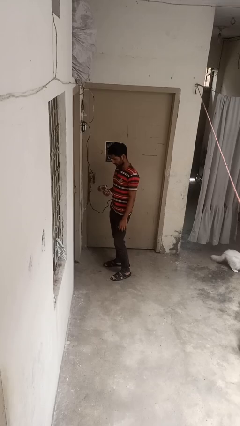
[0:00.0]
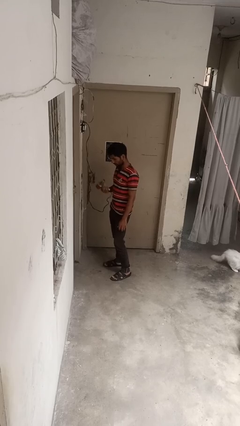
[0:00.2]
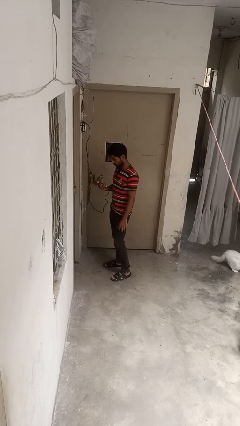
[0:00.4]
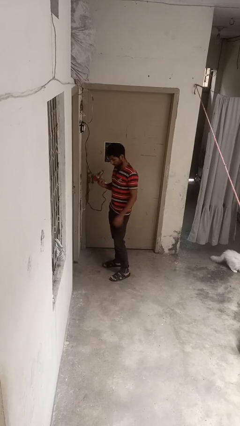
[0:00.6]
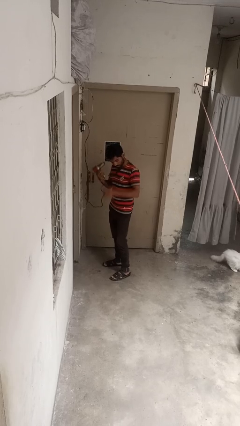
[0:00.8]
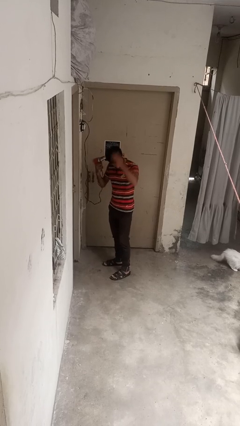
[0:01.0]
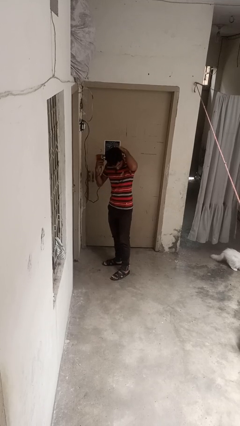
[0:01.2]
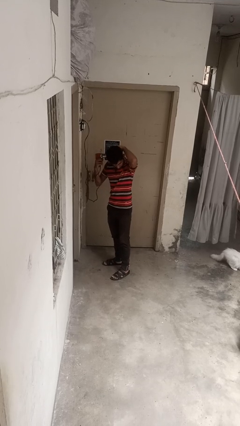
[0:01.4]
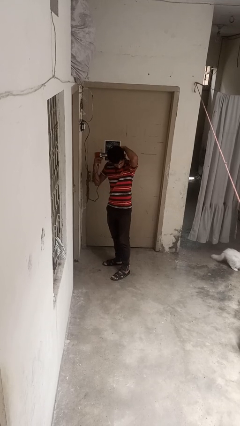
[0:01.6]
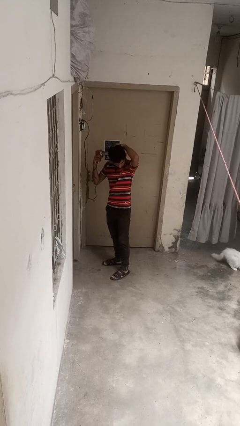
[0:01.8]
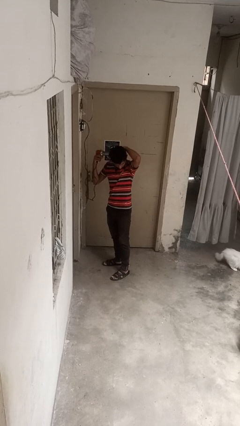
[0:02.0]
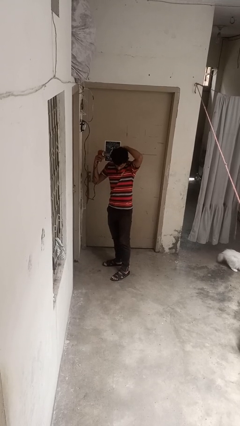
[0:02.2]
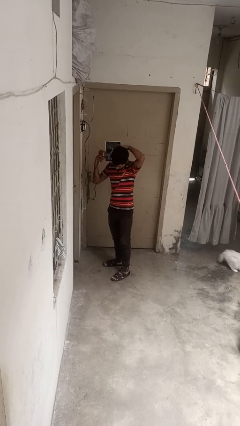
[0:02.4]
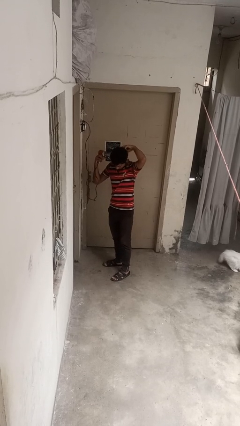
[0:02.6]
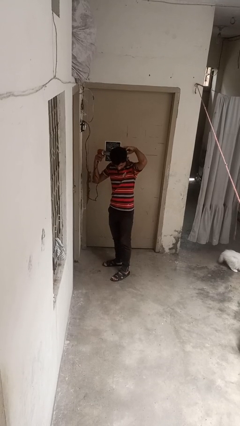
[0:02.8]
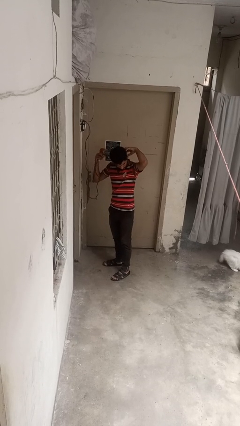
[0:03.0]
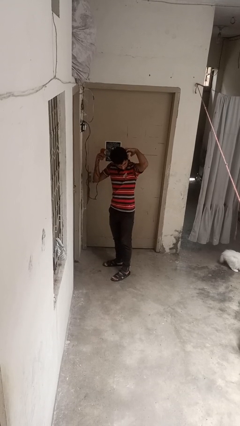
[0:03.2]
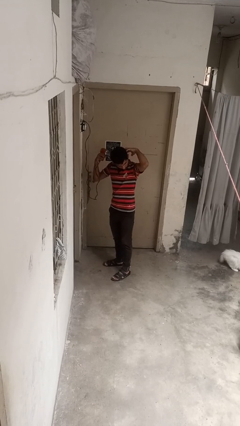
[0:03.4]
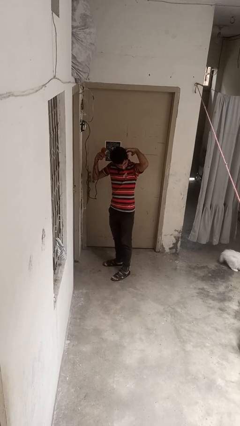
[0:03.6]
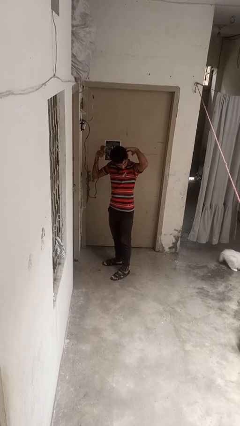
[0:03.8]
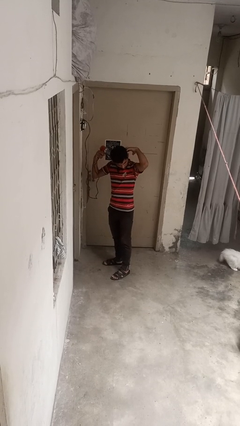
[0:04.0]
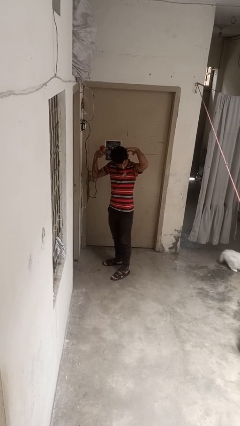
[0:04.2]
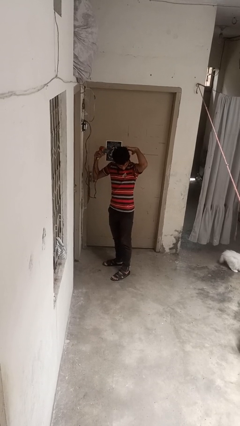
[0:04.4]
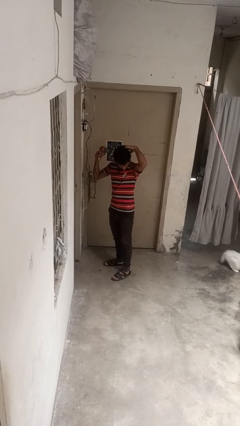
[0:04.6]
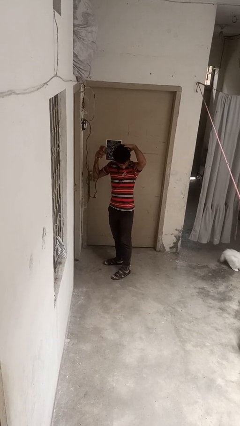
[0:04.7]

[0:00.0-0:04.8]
person dries hair with hairdryer

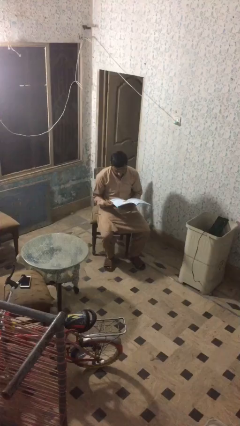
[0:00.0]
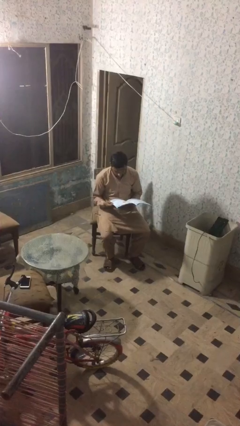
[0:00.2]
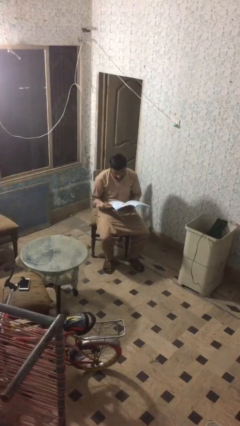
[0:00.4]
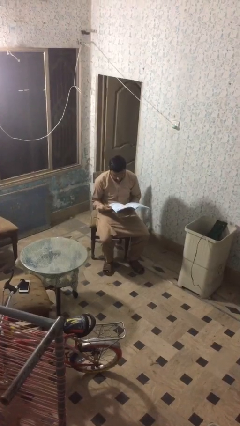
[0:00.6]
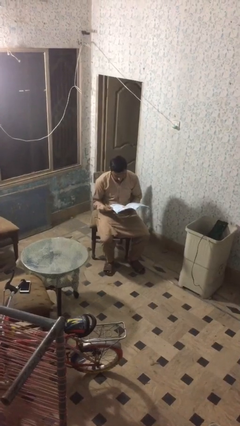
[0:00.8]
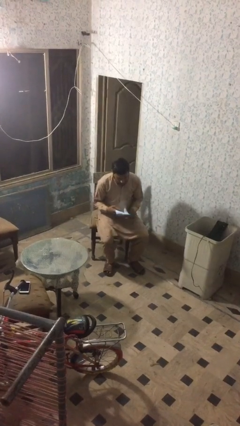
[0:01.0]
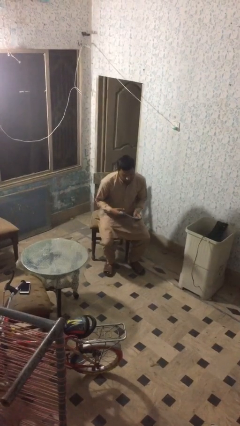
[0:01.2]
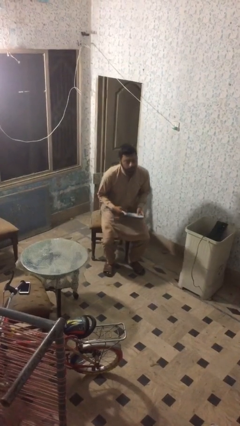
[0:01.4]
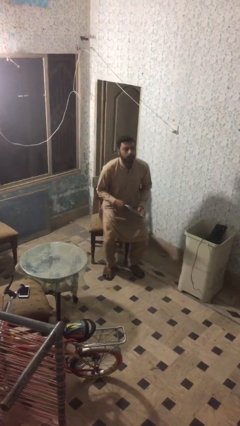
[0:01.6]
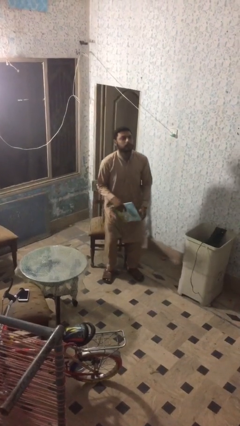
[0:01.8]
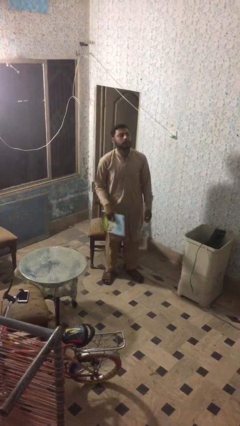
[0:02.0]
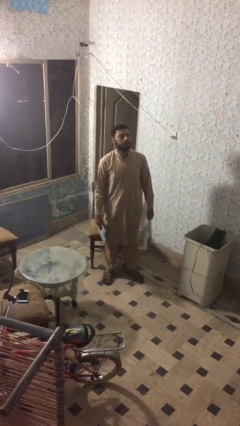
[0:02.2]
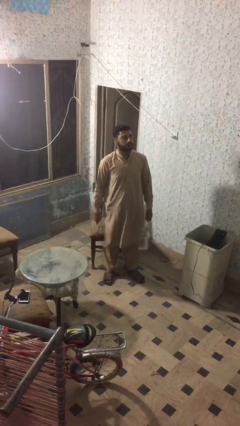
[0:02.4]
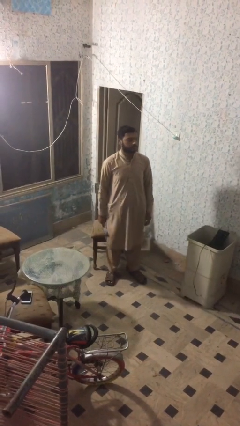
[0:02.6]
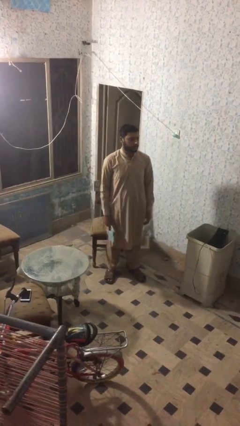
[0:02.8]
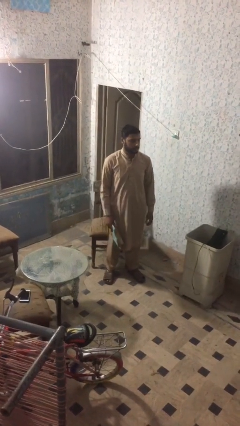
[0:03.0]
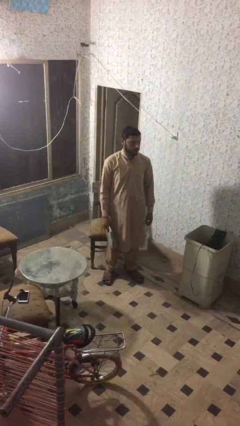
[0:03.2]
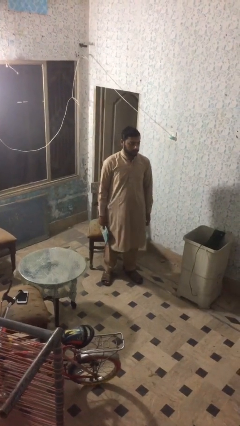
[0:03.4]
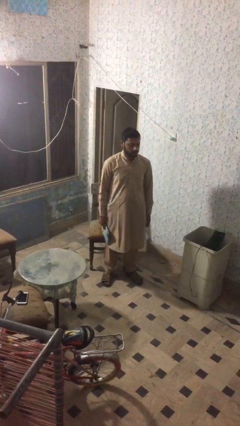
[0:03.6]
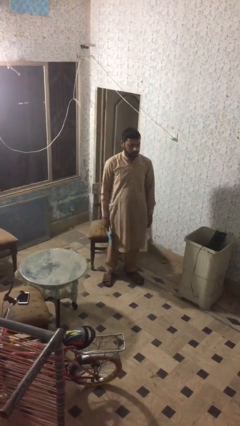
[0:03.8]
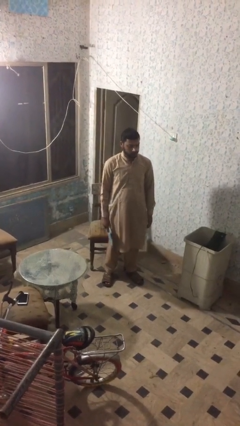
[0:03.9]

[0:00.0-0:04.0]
person stands up

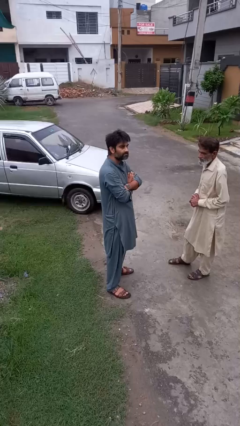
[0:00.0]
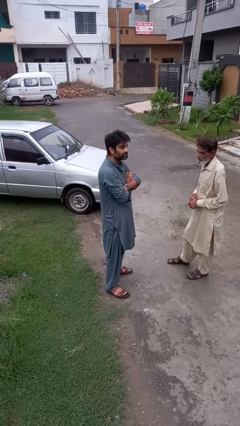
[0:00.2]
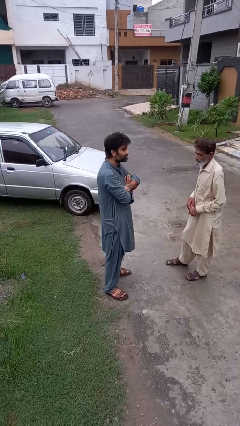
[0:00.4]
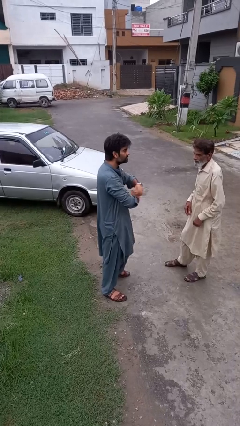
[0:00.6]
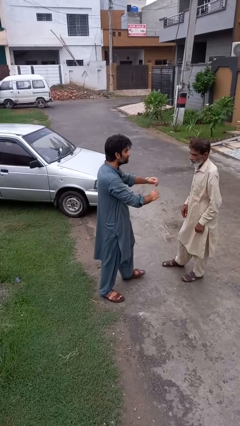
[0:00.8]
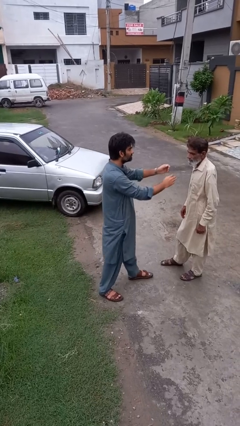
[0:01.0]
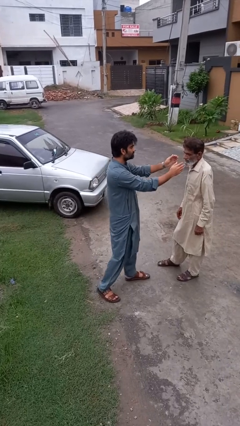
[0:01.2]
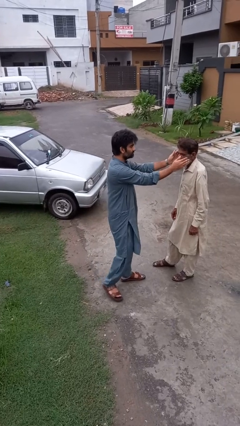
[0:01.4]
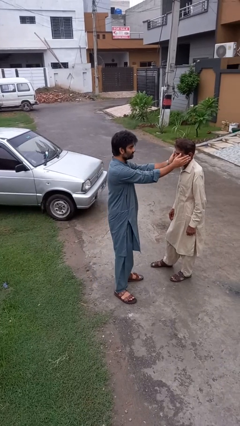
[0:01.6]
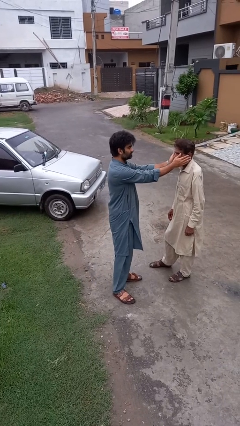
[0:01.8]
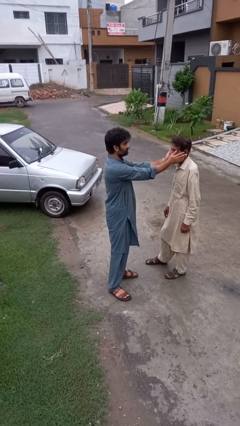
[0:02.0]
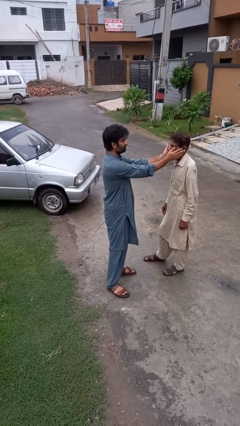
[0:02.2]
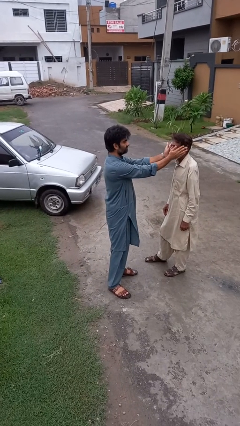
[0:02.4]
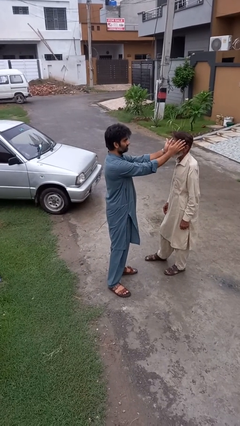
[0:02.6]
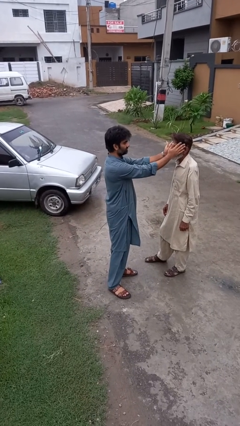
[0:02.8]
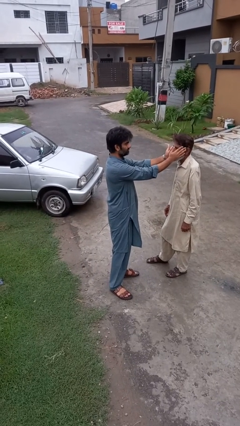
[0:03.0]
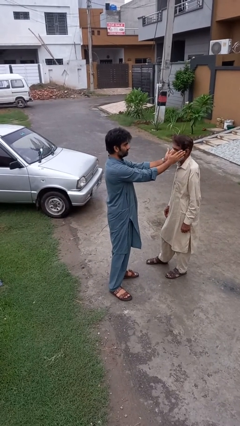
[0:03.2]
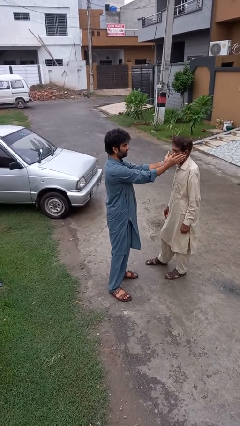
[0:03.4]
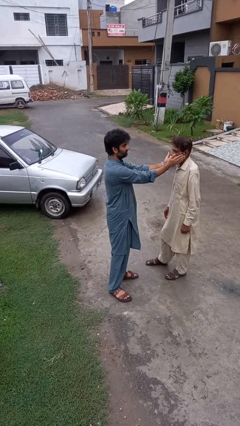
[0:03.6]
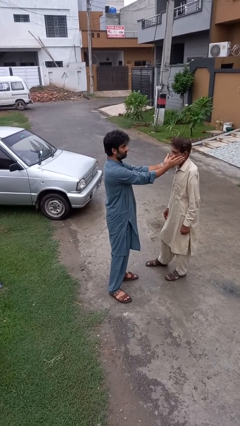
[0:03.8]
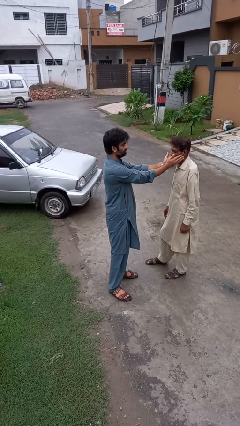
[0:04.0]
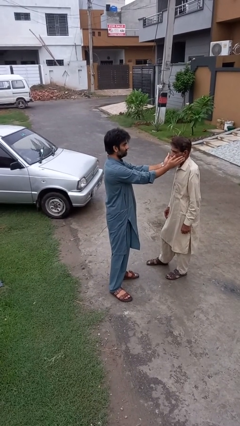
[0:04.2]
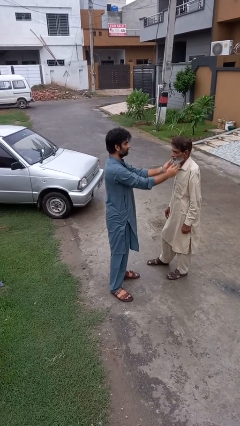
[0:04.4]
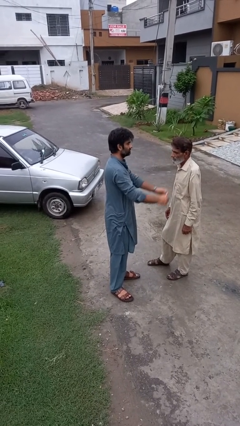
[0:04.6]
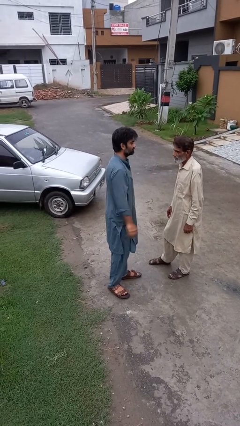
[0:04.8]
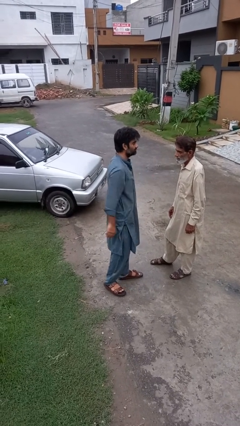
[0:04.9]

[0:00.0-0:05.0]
person touches face of person

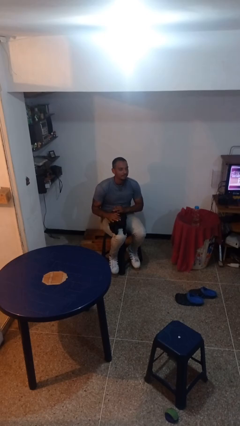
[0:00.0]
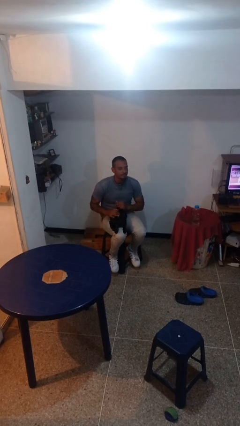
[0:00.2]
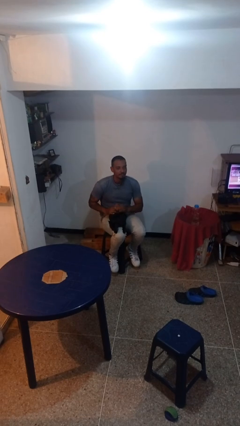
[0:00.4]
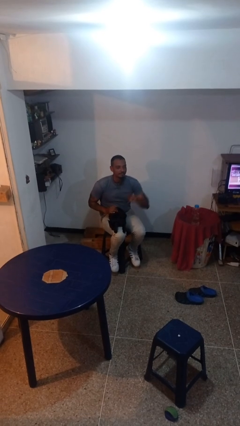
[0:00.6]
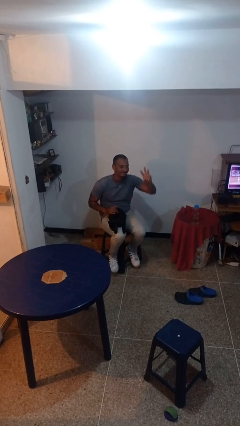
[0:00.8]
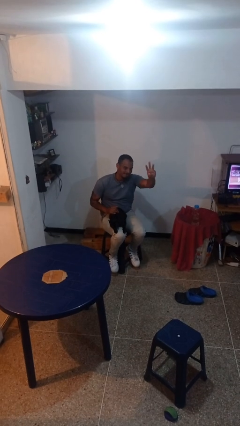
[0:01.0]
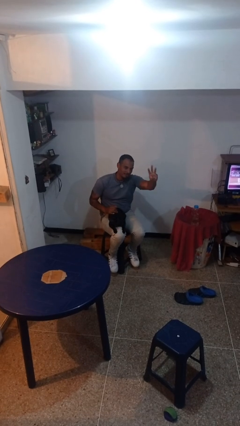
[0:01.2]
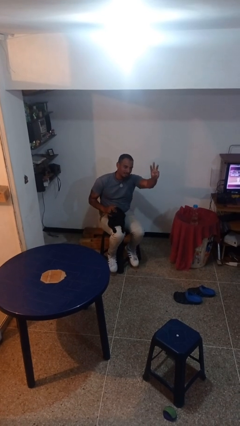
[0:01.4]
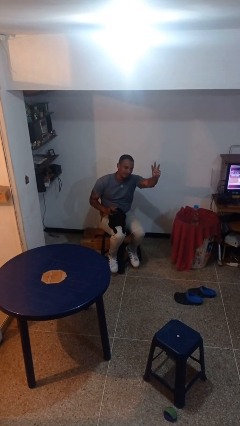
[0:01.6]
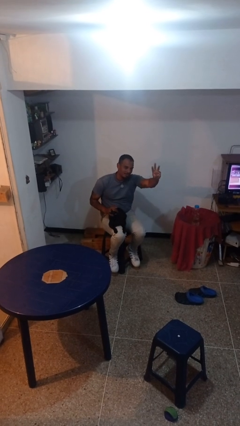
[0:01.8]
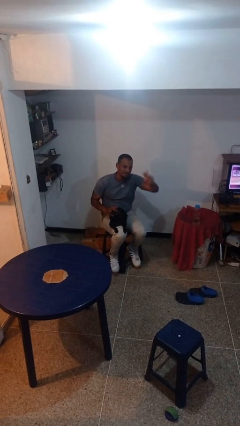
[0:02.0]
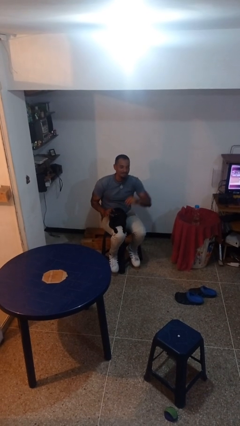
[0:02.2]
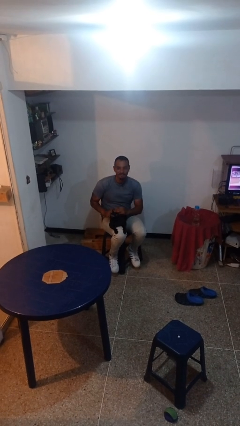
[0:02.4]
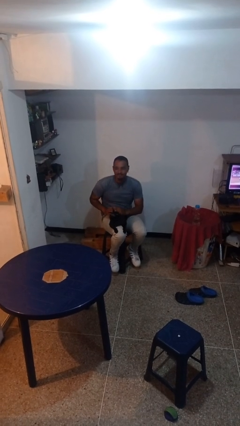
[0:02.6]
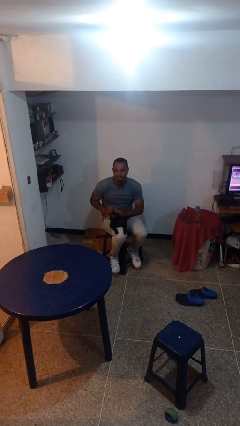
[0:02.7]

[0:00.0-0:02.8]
person gestures number three

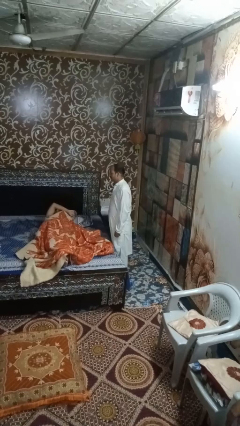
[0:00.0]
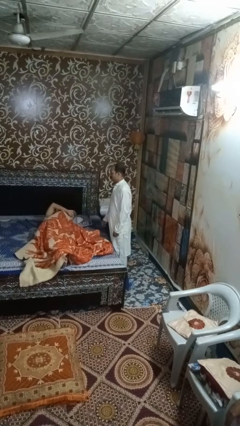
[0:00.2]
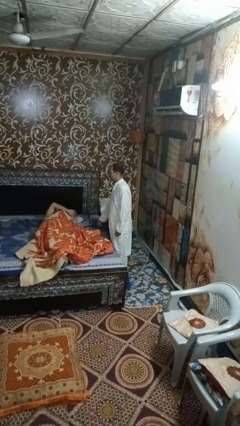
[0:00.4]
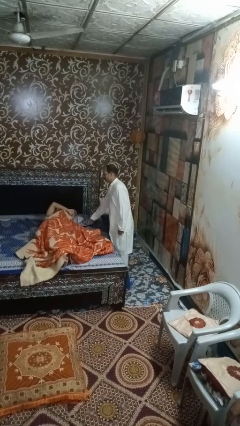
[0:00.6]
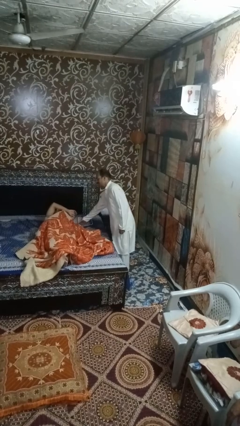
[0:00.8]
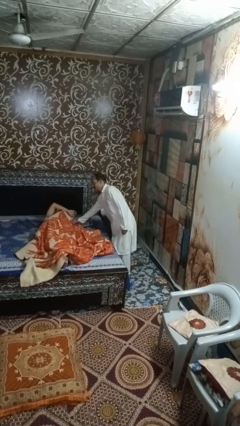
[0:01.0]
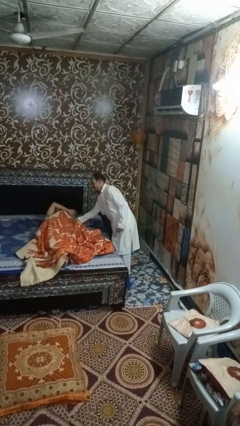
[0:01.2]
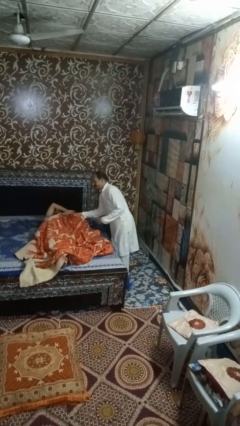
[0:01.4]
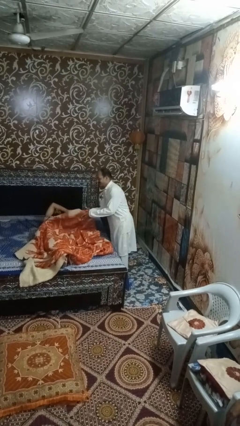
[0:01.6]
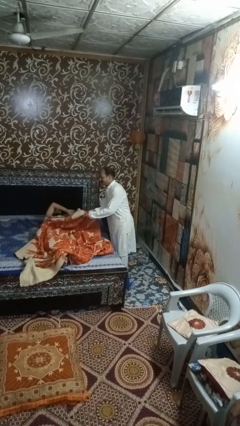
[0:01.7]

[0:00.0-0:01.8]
person uncovers friend with blanket
